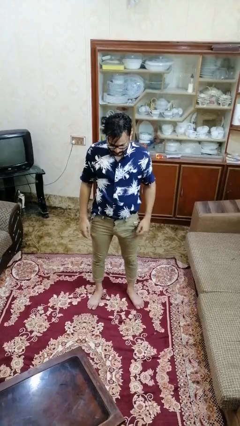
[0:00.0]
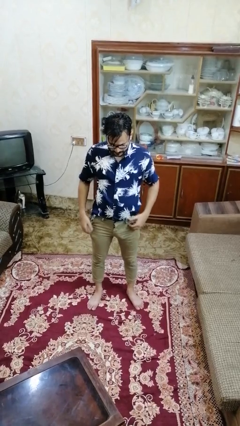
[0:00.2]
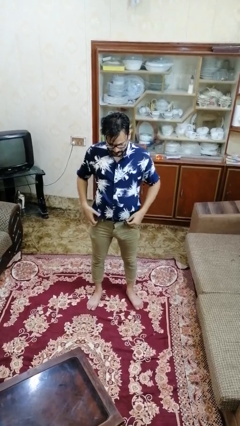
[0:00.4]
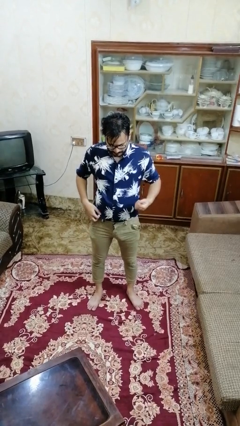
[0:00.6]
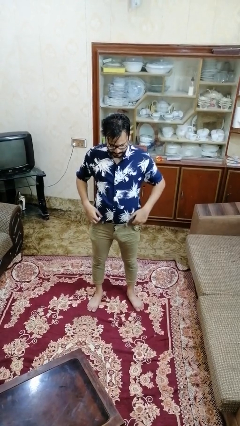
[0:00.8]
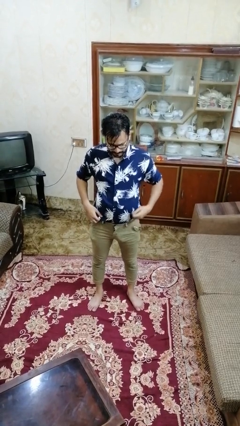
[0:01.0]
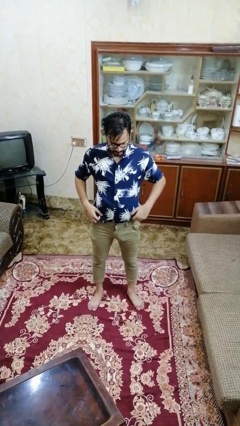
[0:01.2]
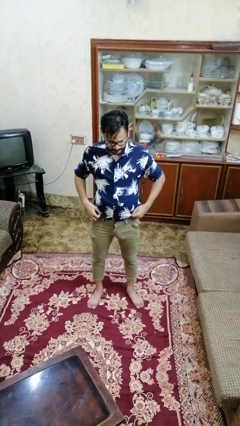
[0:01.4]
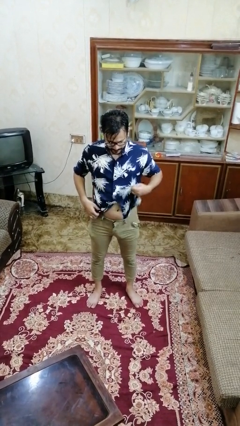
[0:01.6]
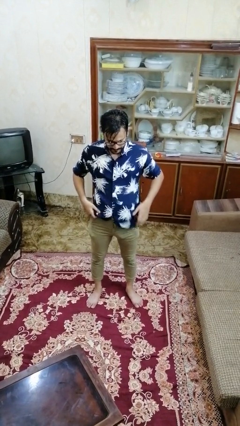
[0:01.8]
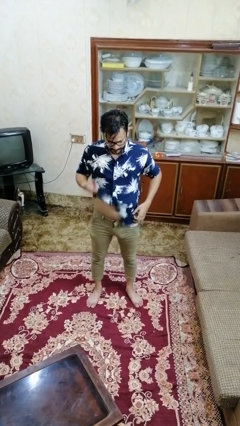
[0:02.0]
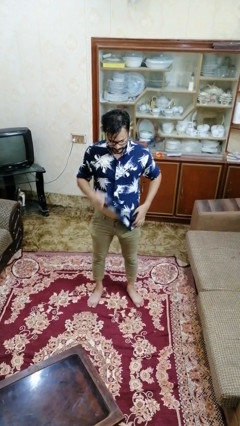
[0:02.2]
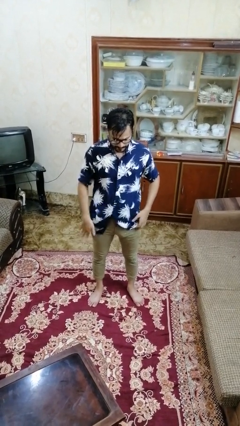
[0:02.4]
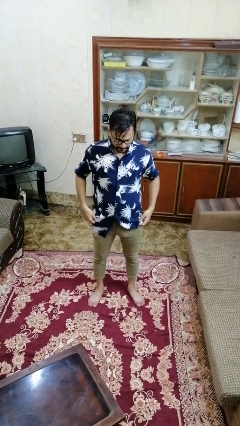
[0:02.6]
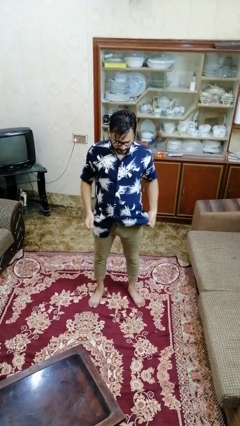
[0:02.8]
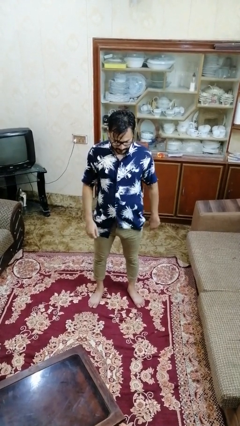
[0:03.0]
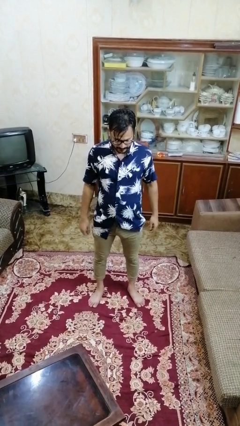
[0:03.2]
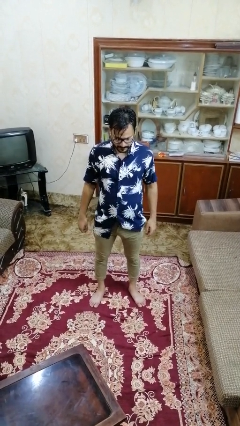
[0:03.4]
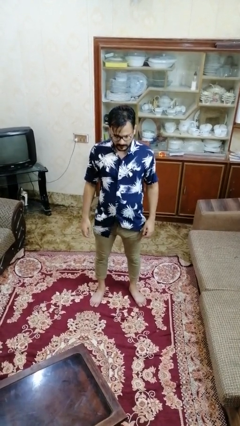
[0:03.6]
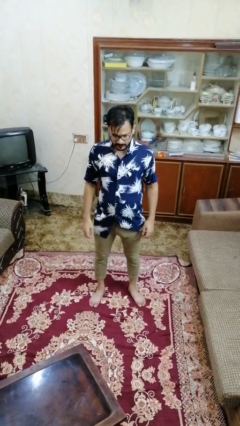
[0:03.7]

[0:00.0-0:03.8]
person untucks shirt

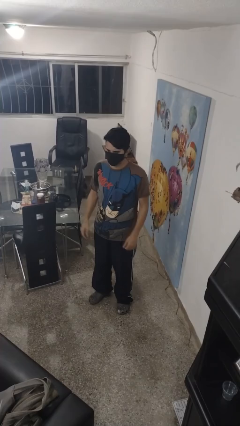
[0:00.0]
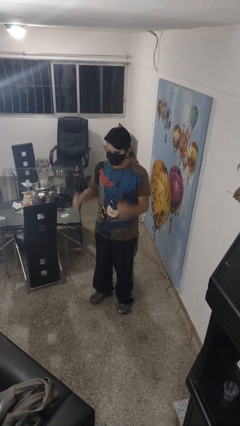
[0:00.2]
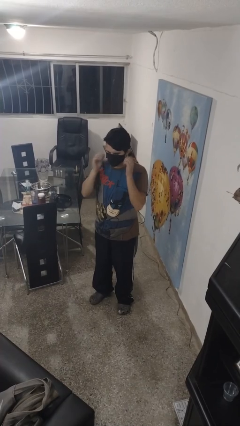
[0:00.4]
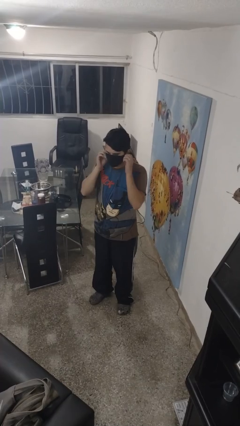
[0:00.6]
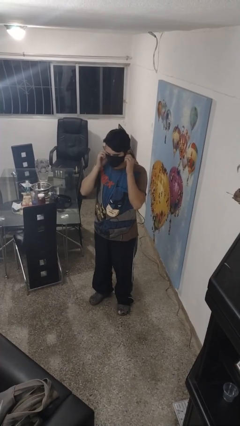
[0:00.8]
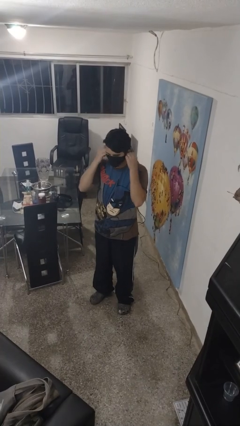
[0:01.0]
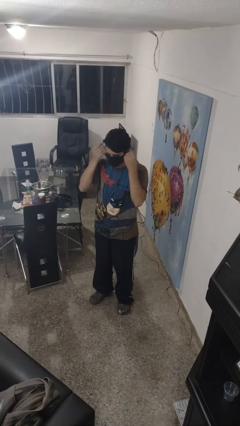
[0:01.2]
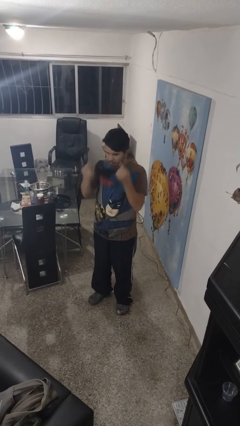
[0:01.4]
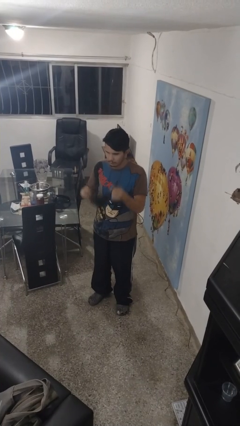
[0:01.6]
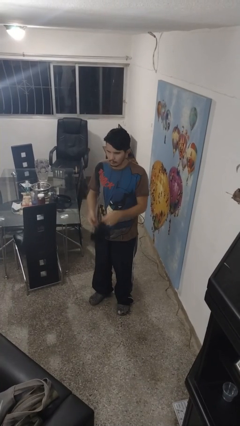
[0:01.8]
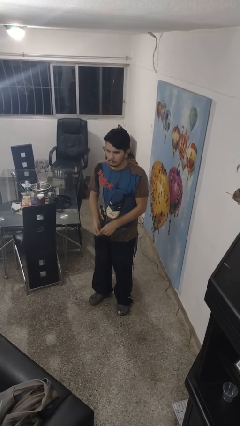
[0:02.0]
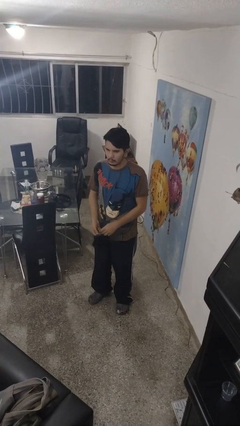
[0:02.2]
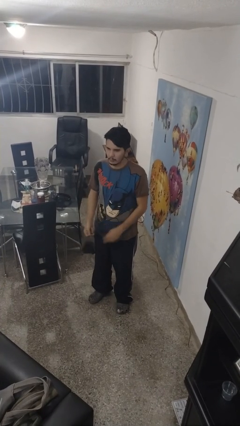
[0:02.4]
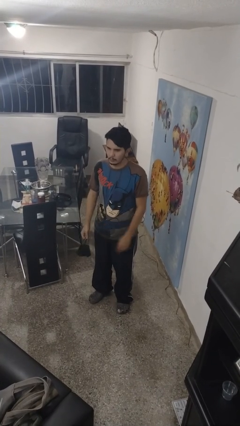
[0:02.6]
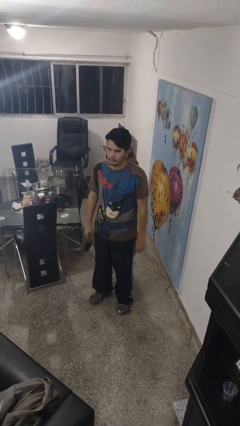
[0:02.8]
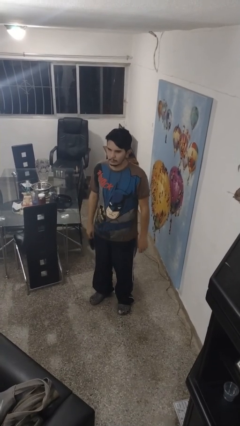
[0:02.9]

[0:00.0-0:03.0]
person takes off facemask

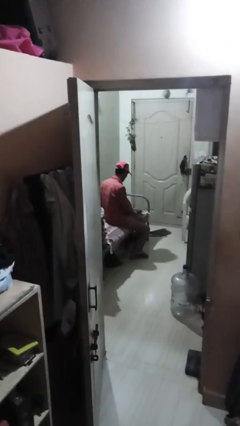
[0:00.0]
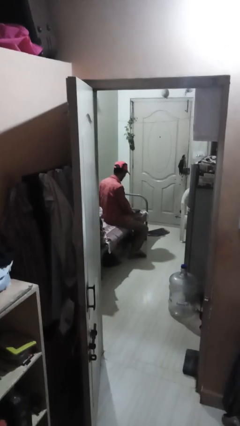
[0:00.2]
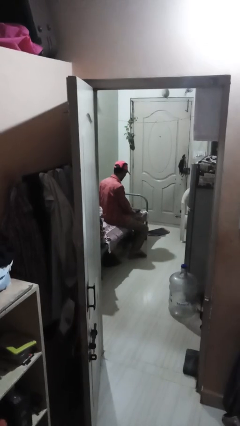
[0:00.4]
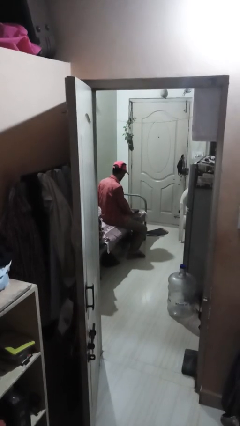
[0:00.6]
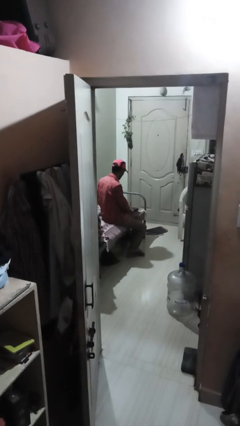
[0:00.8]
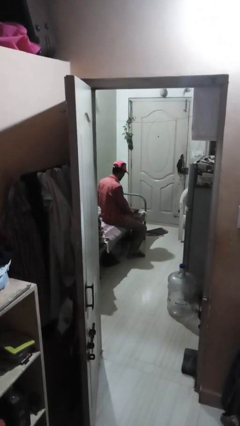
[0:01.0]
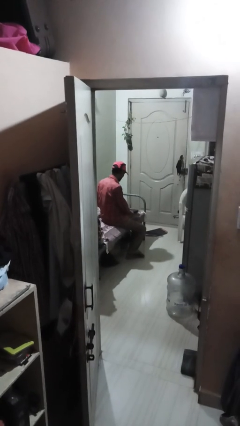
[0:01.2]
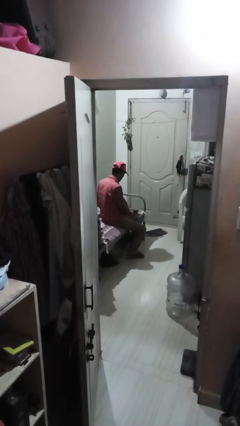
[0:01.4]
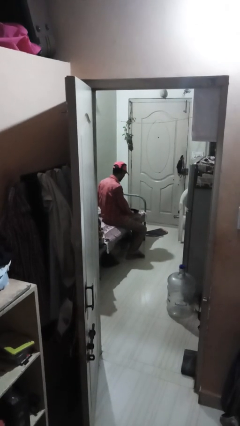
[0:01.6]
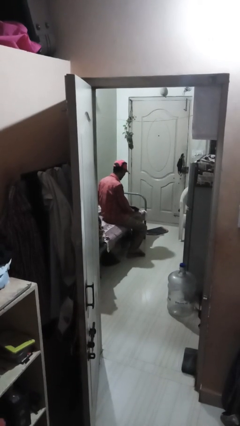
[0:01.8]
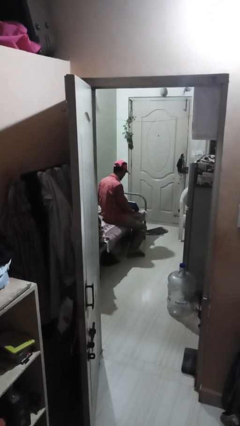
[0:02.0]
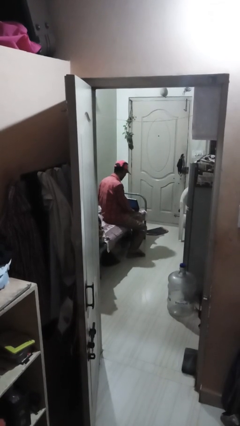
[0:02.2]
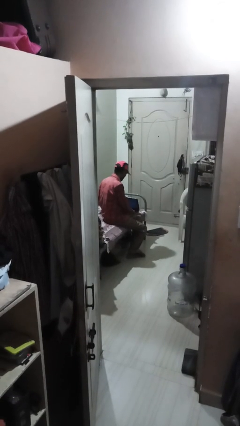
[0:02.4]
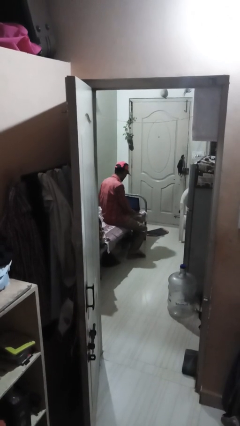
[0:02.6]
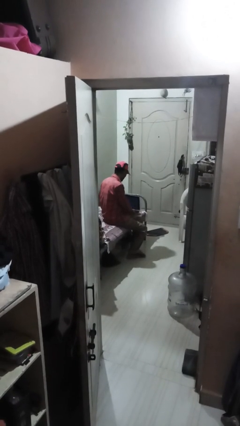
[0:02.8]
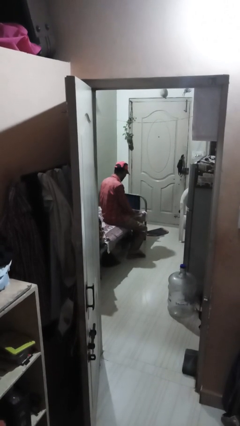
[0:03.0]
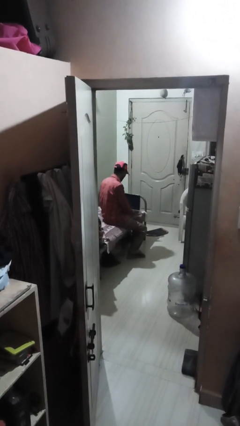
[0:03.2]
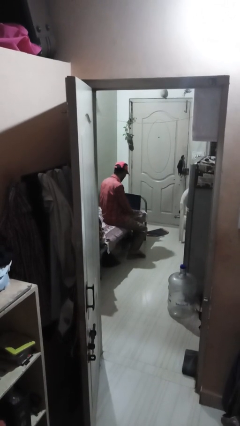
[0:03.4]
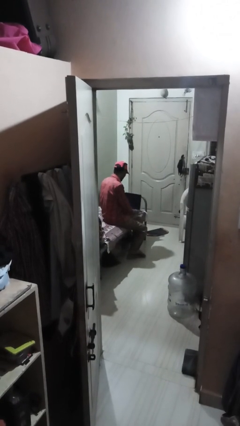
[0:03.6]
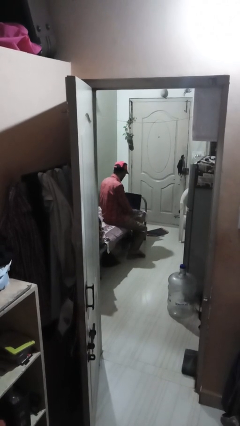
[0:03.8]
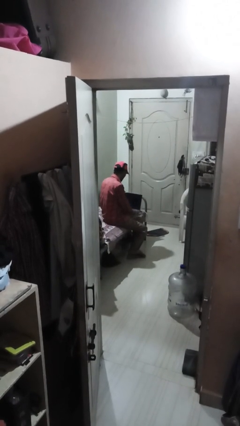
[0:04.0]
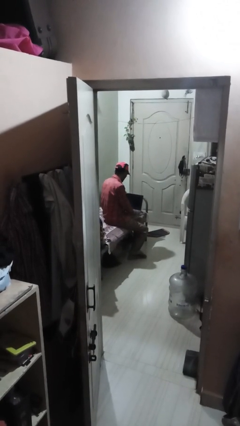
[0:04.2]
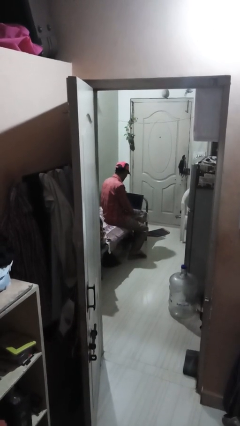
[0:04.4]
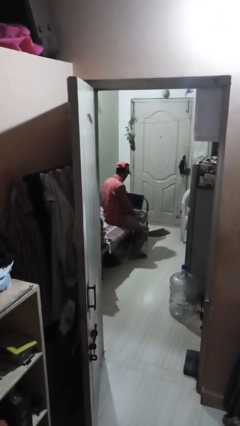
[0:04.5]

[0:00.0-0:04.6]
person opens laptop

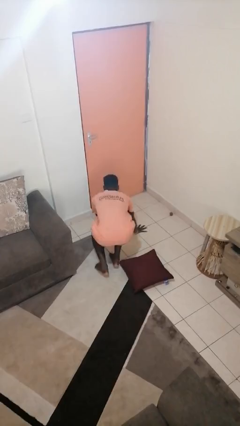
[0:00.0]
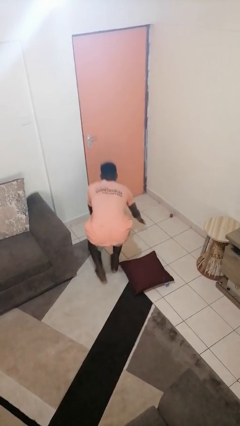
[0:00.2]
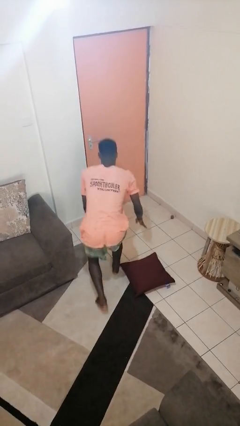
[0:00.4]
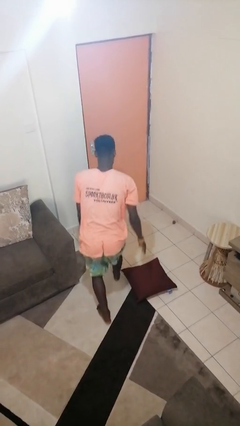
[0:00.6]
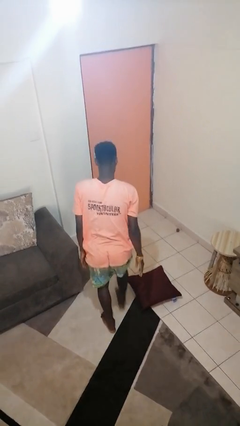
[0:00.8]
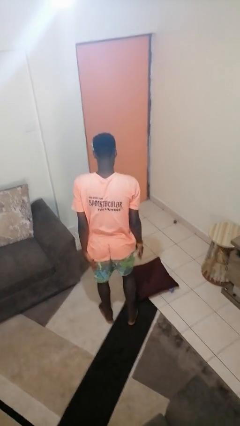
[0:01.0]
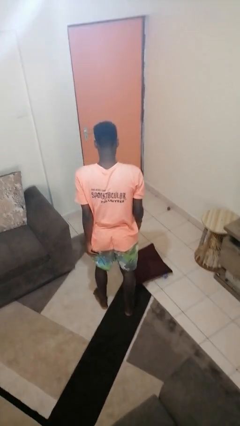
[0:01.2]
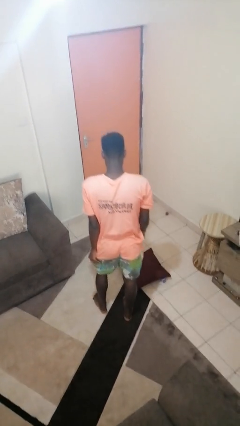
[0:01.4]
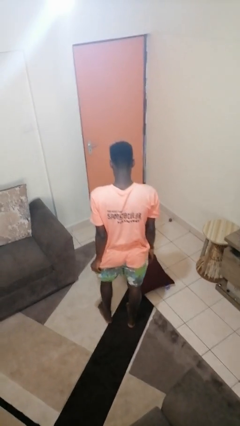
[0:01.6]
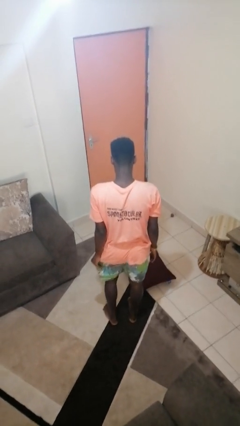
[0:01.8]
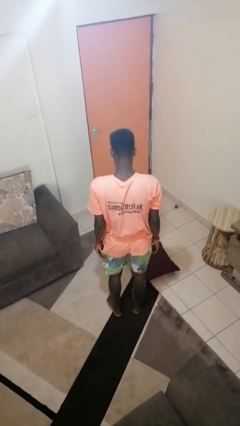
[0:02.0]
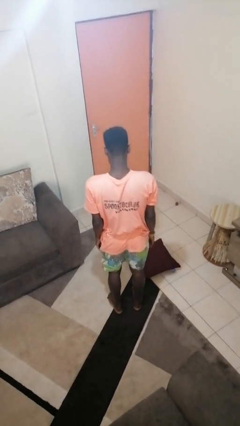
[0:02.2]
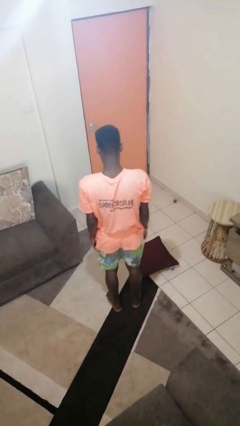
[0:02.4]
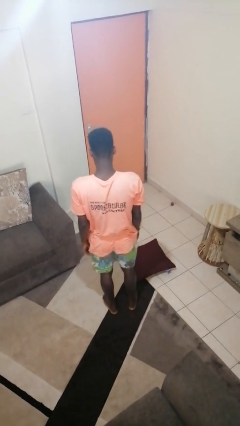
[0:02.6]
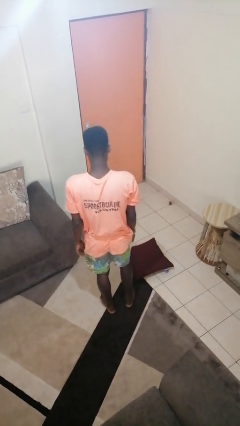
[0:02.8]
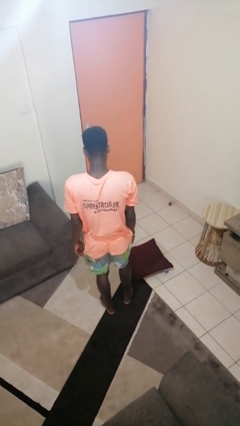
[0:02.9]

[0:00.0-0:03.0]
person stands up from floor

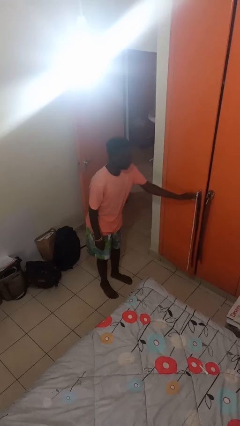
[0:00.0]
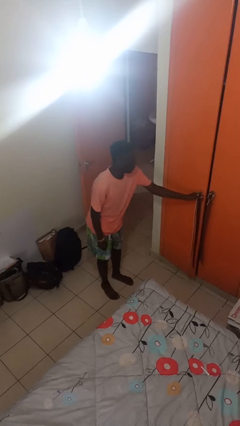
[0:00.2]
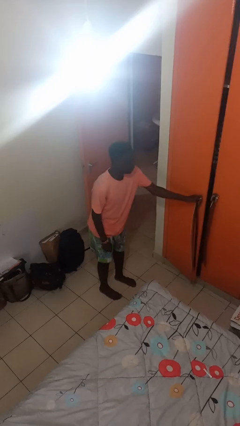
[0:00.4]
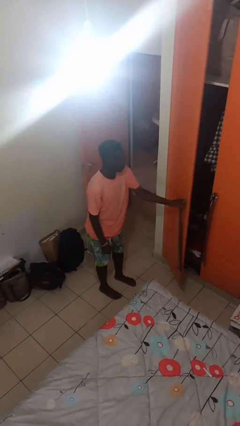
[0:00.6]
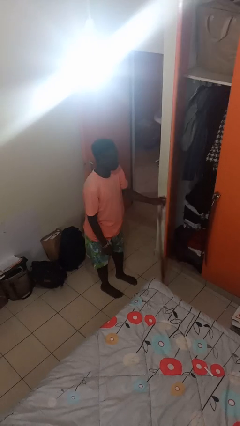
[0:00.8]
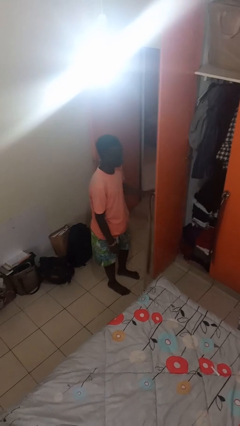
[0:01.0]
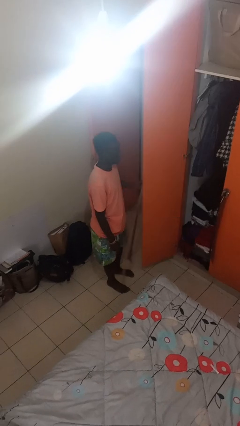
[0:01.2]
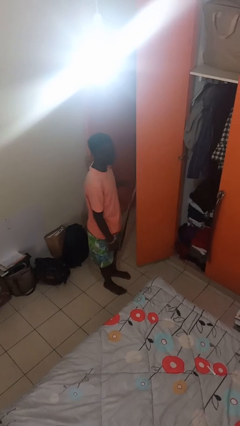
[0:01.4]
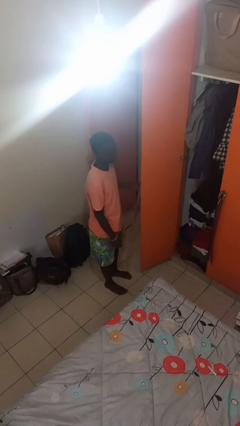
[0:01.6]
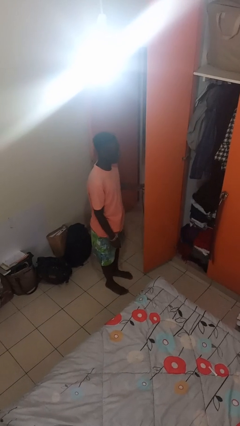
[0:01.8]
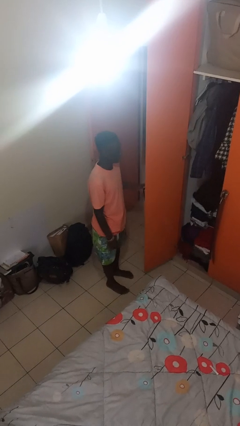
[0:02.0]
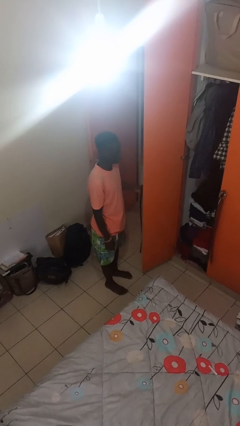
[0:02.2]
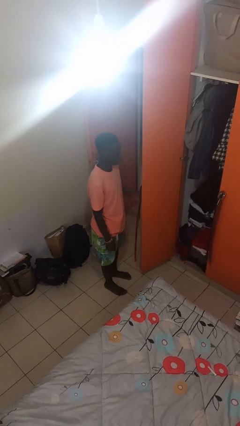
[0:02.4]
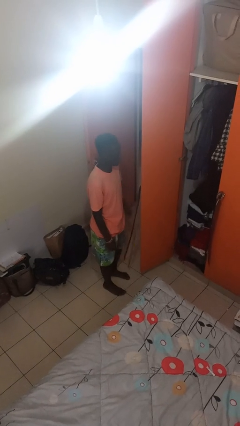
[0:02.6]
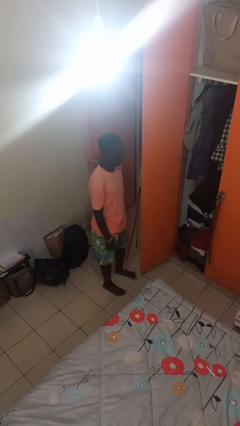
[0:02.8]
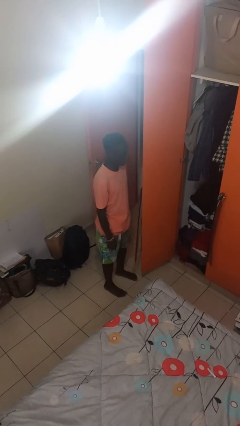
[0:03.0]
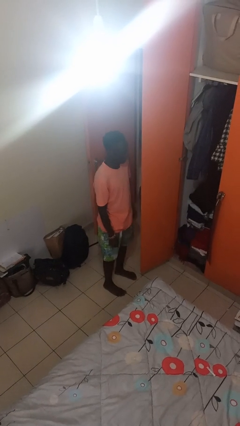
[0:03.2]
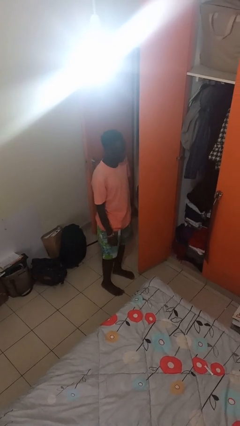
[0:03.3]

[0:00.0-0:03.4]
person opens closet door
